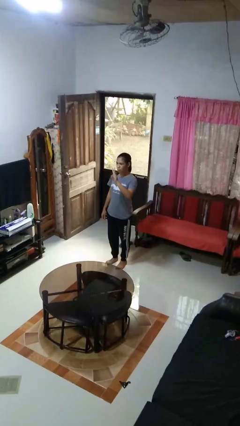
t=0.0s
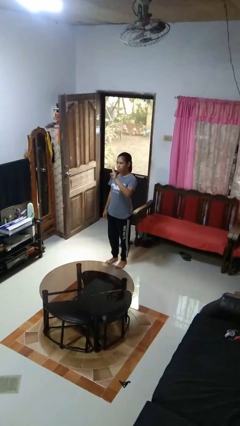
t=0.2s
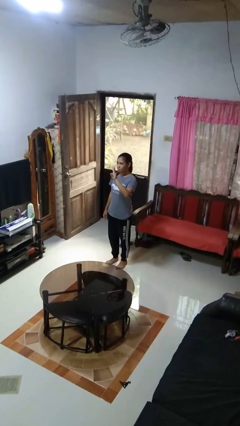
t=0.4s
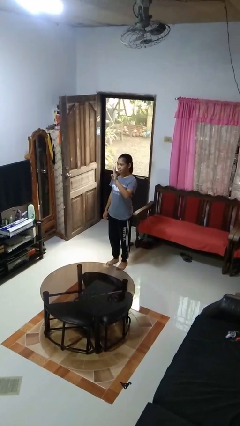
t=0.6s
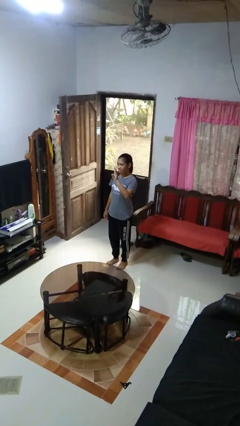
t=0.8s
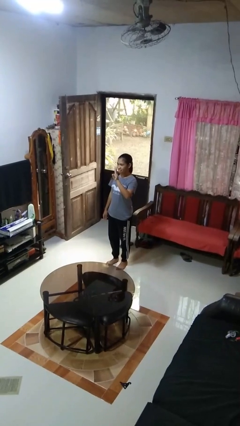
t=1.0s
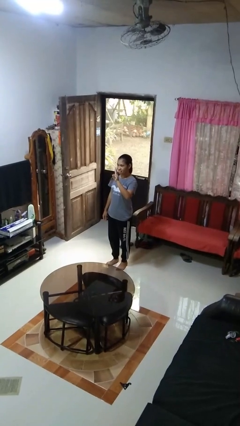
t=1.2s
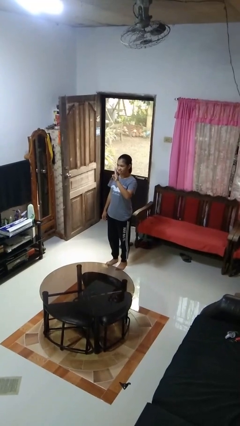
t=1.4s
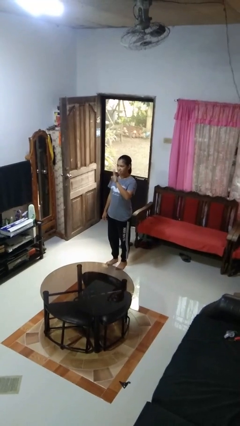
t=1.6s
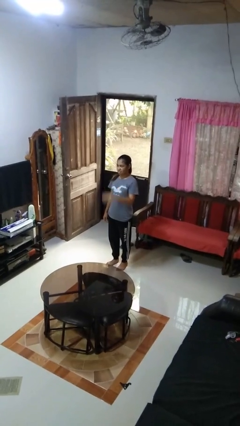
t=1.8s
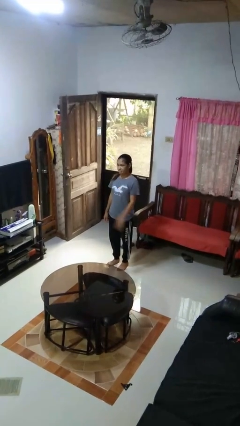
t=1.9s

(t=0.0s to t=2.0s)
person gestures number three

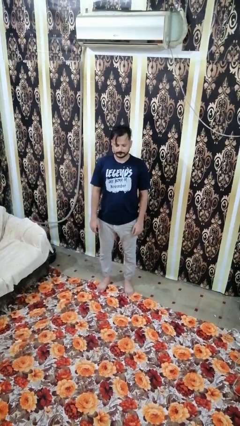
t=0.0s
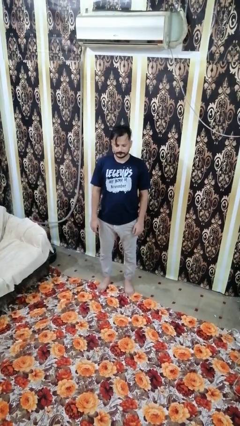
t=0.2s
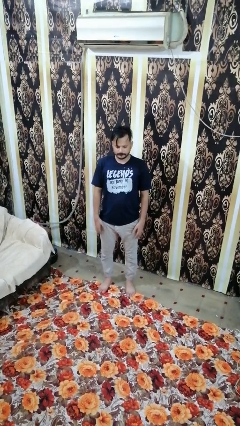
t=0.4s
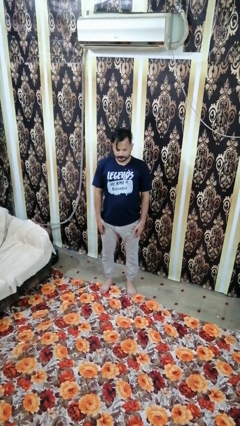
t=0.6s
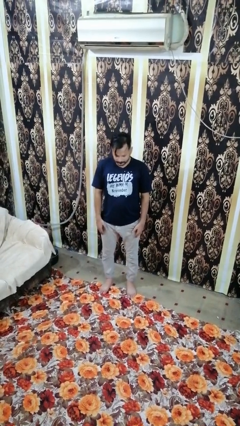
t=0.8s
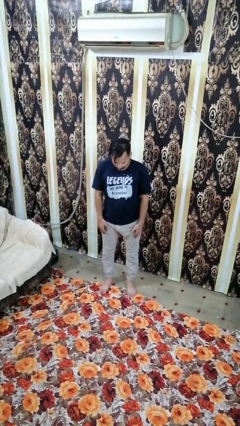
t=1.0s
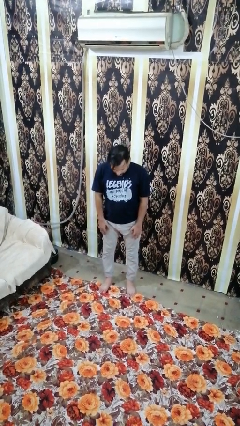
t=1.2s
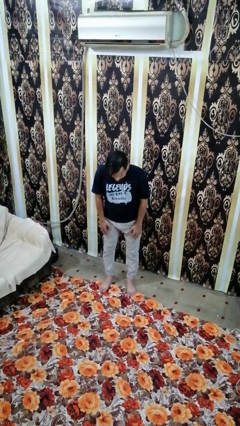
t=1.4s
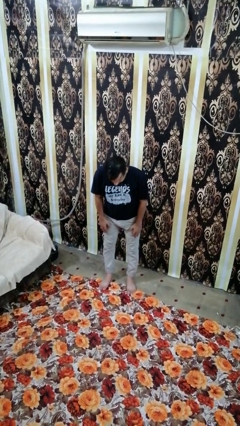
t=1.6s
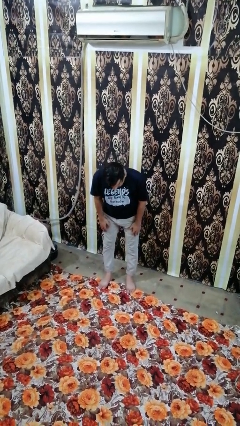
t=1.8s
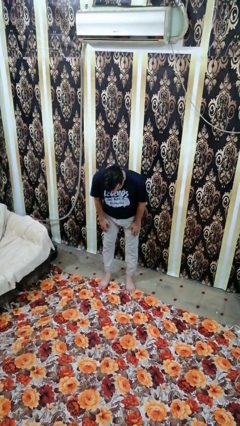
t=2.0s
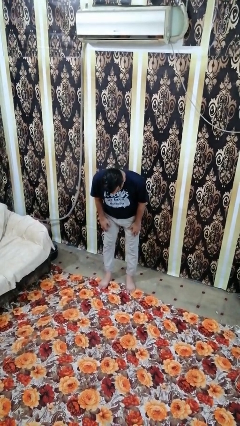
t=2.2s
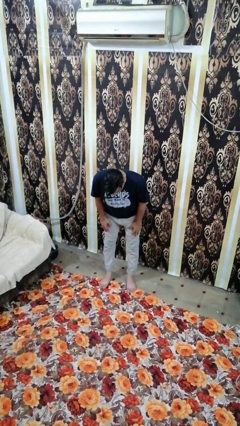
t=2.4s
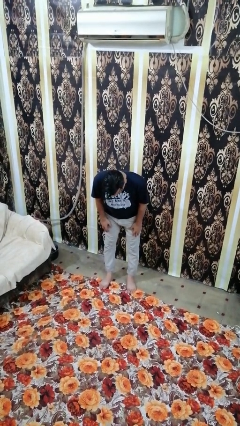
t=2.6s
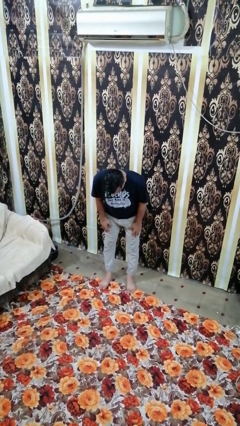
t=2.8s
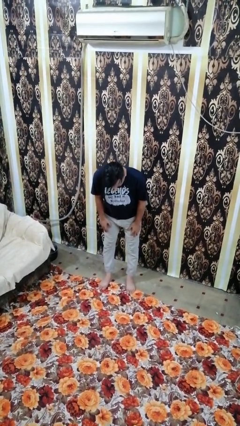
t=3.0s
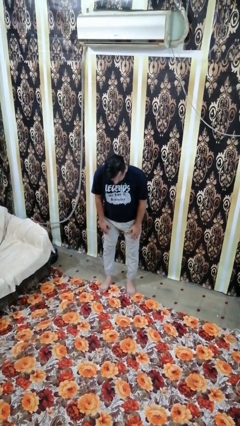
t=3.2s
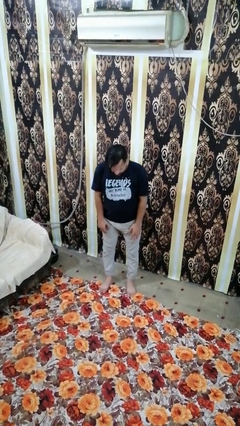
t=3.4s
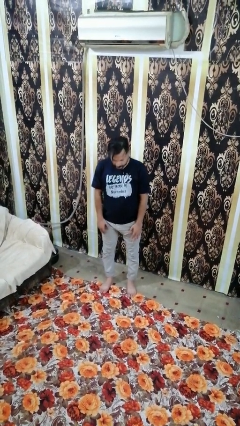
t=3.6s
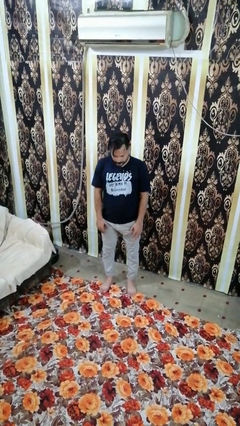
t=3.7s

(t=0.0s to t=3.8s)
person bows

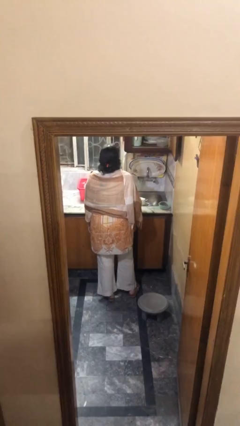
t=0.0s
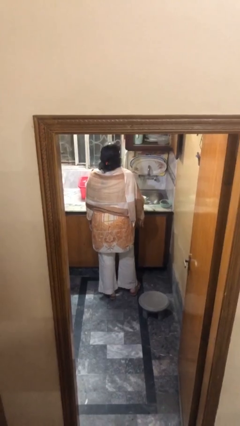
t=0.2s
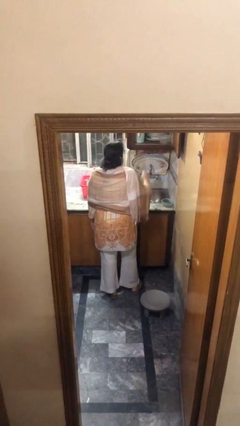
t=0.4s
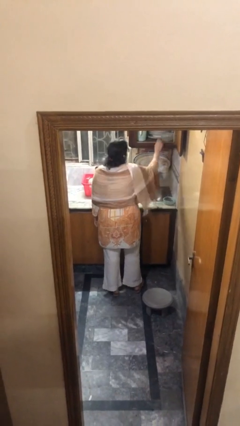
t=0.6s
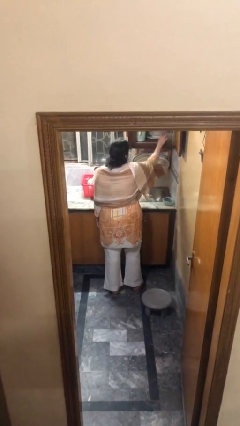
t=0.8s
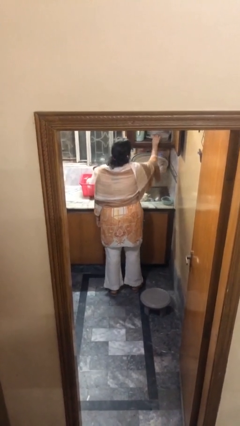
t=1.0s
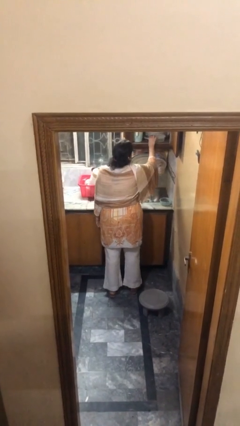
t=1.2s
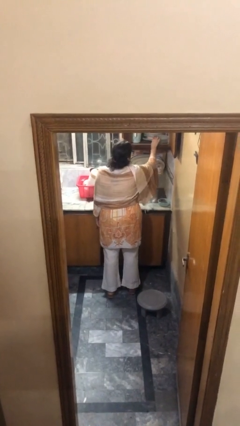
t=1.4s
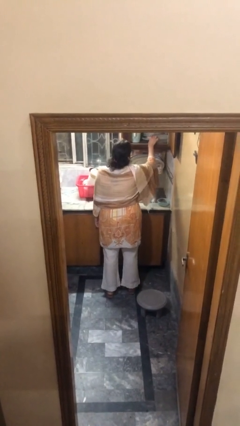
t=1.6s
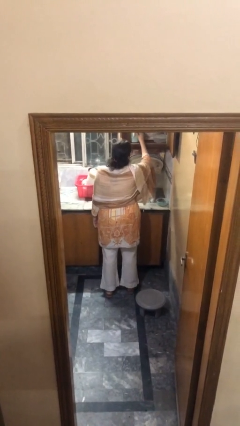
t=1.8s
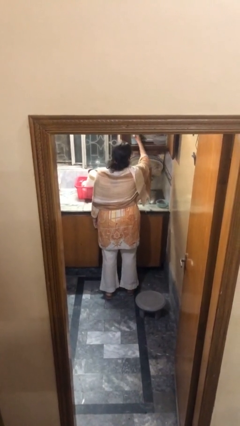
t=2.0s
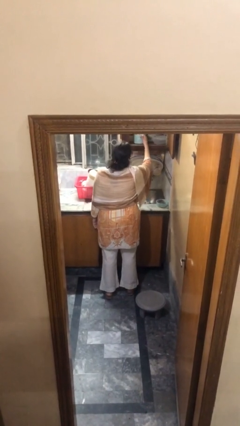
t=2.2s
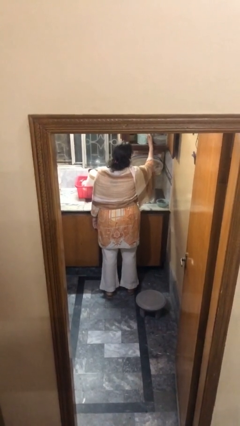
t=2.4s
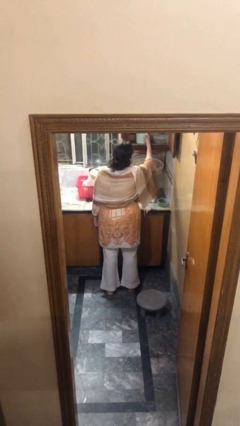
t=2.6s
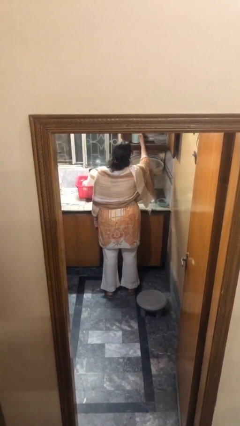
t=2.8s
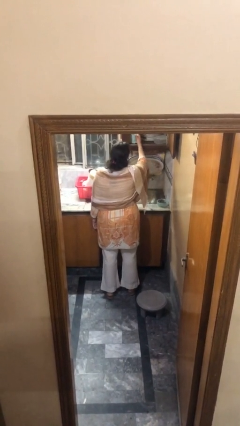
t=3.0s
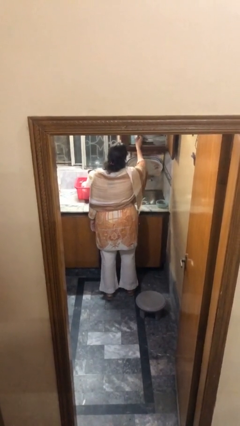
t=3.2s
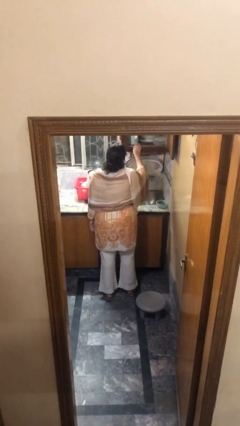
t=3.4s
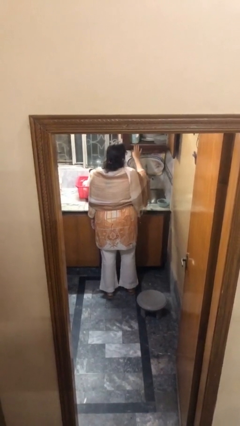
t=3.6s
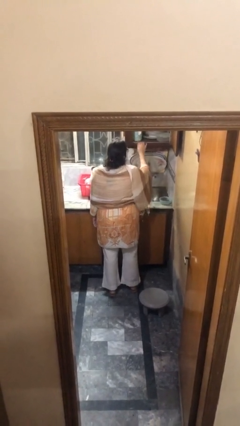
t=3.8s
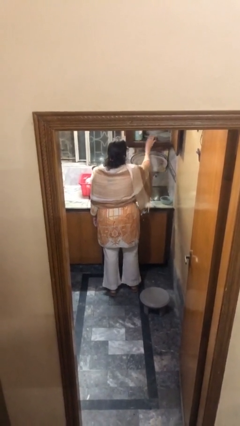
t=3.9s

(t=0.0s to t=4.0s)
person searches in kitchen drawer

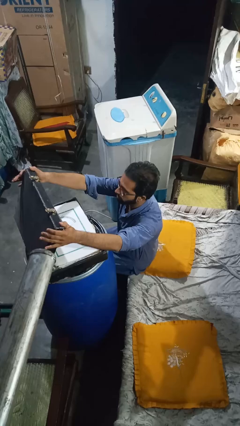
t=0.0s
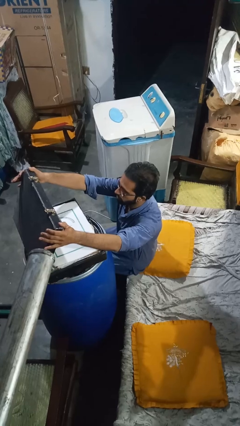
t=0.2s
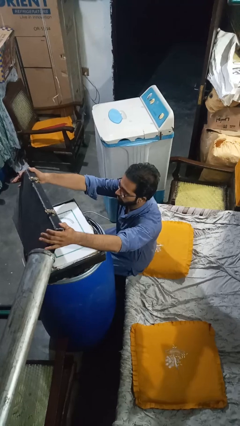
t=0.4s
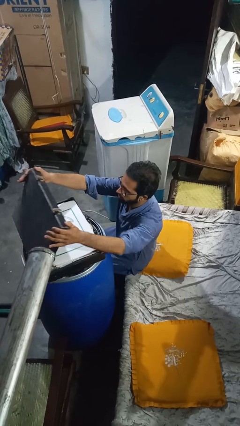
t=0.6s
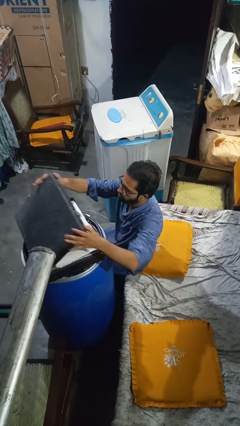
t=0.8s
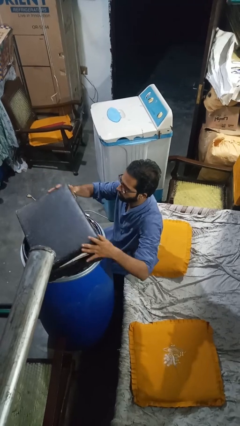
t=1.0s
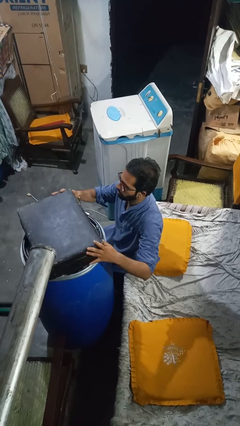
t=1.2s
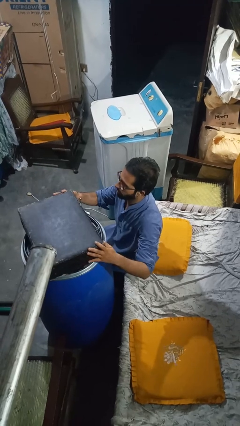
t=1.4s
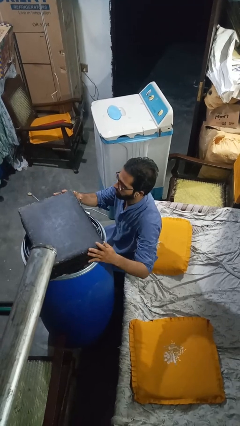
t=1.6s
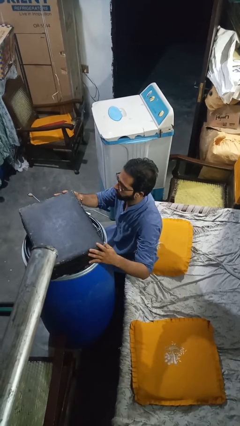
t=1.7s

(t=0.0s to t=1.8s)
person closes suitcase

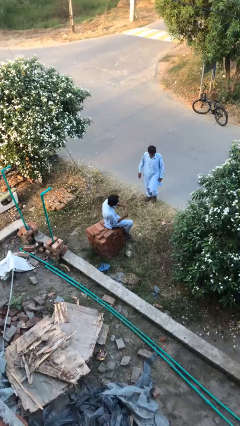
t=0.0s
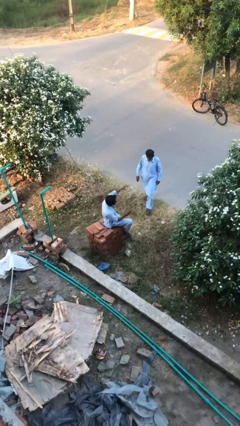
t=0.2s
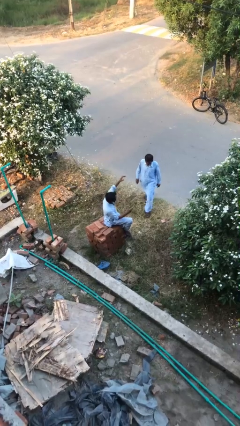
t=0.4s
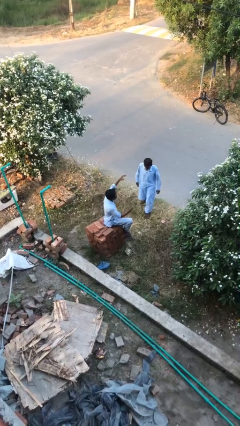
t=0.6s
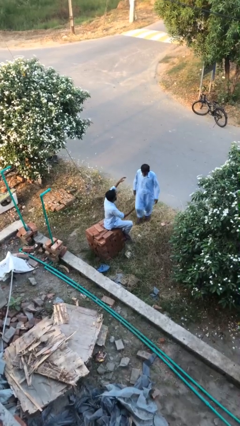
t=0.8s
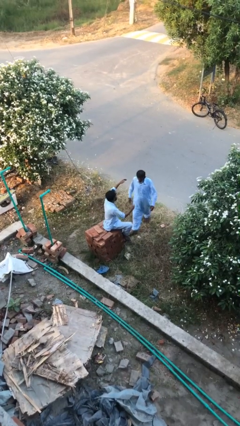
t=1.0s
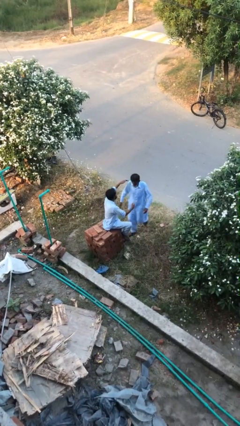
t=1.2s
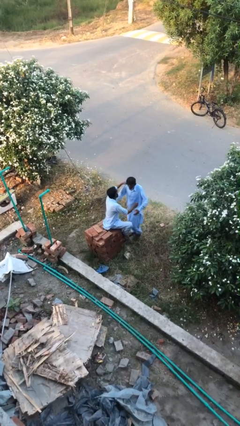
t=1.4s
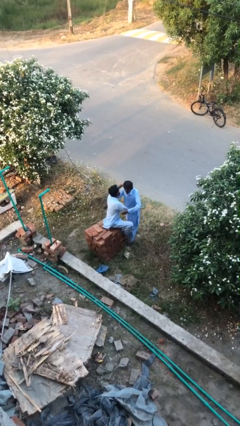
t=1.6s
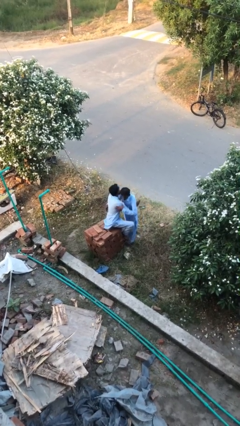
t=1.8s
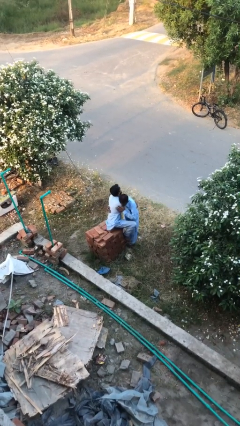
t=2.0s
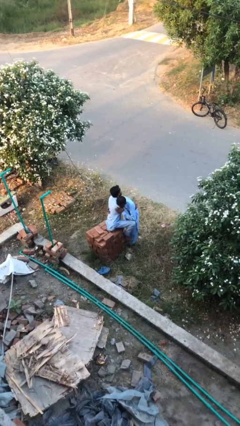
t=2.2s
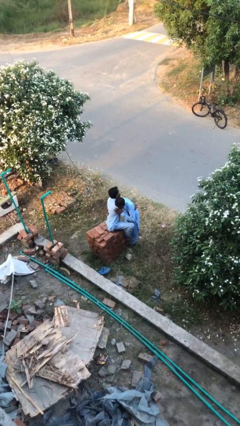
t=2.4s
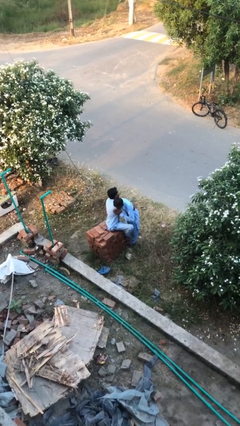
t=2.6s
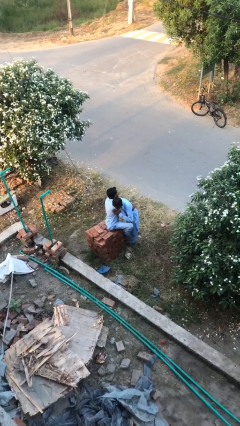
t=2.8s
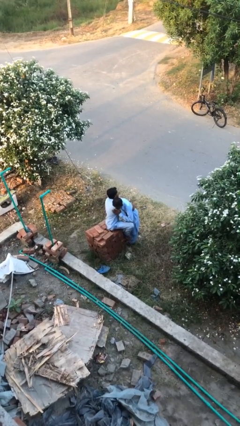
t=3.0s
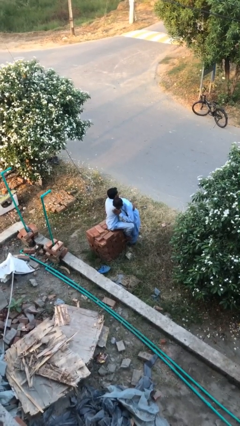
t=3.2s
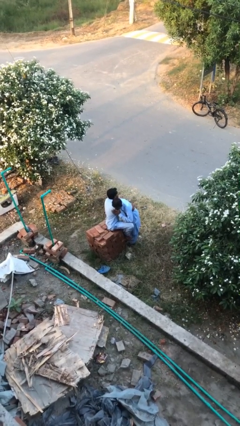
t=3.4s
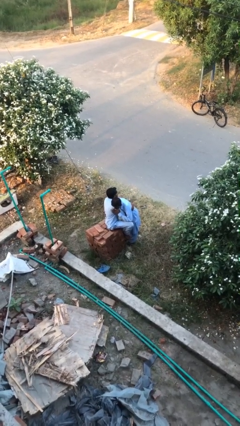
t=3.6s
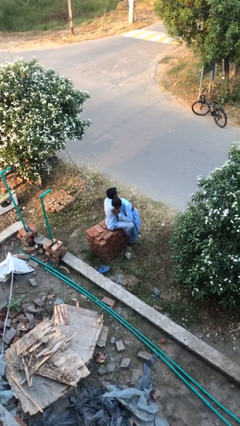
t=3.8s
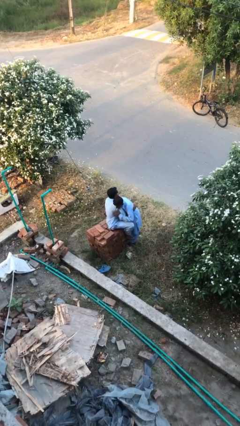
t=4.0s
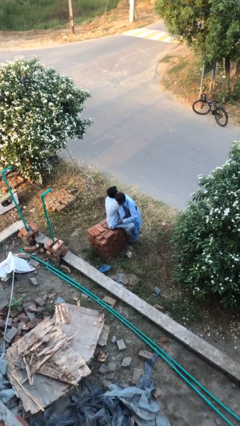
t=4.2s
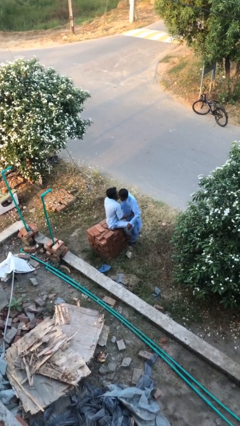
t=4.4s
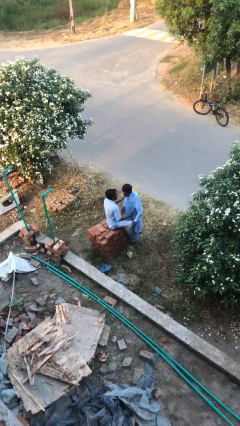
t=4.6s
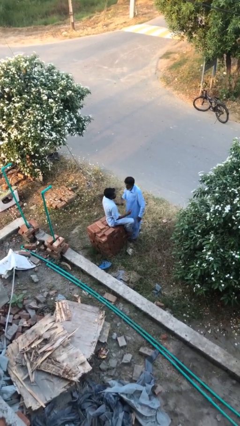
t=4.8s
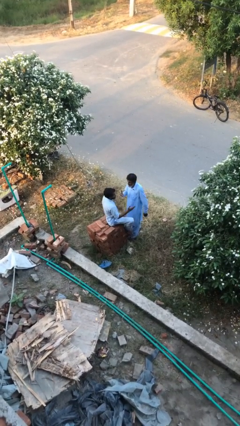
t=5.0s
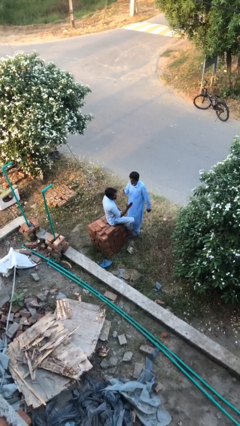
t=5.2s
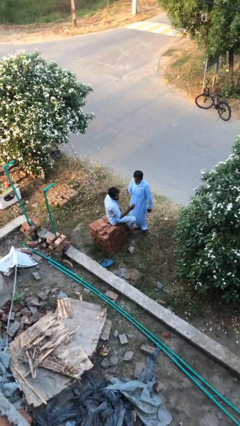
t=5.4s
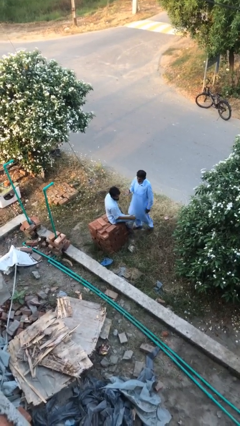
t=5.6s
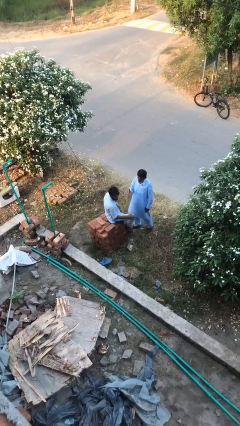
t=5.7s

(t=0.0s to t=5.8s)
person embraces person
